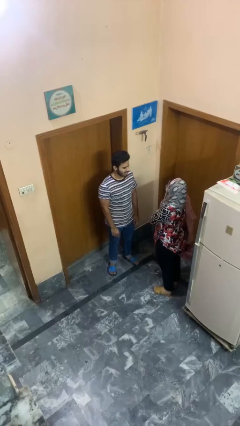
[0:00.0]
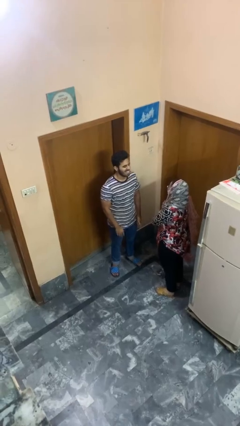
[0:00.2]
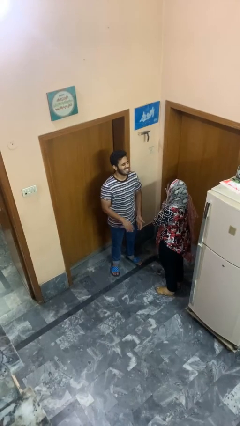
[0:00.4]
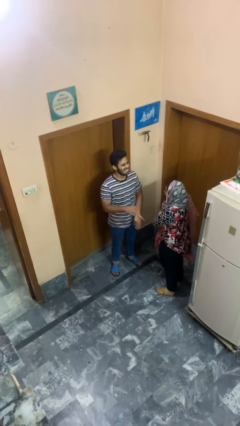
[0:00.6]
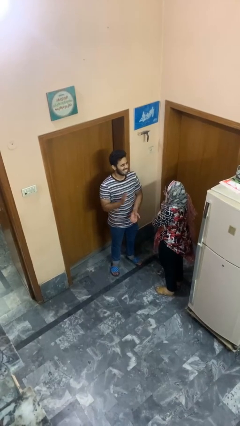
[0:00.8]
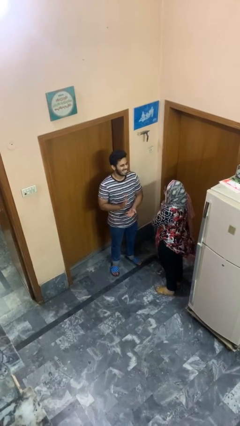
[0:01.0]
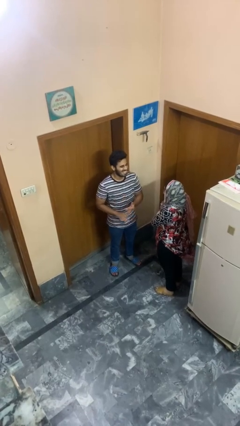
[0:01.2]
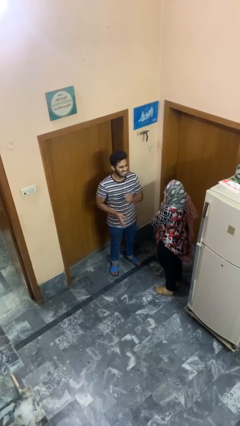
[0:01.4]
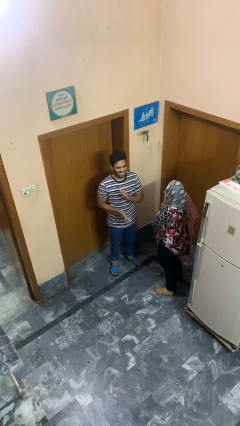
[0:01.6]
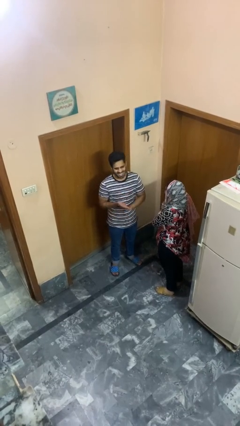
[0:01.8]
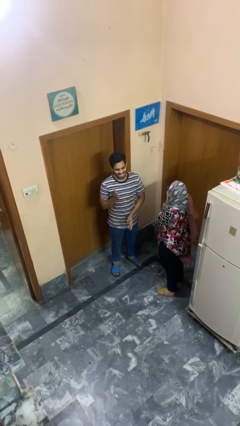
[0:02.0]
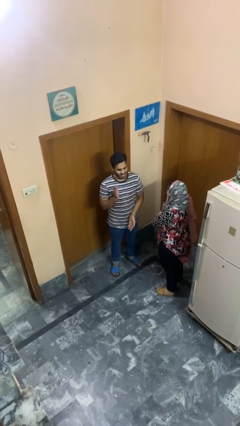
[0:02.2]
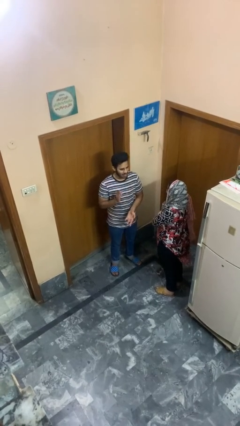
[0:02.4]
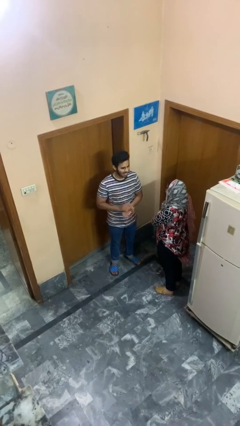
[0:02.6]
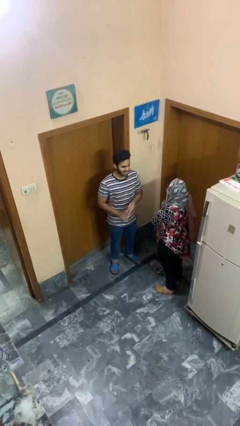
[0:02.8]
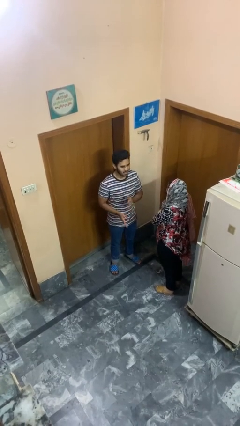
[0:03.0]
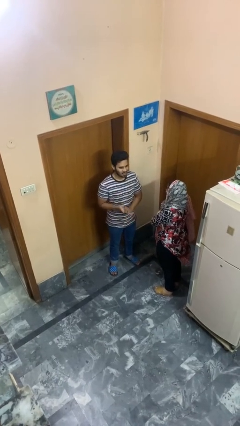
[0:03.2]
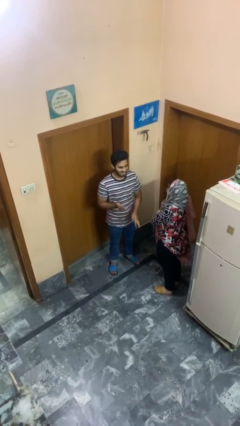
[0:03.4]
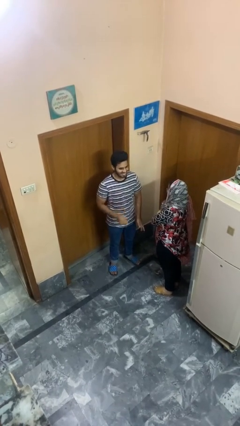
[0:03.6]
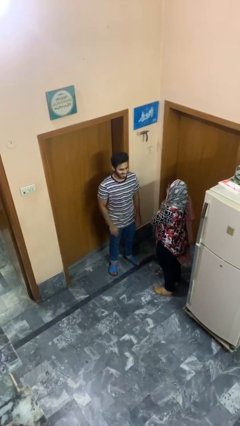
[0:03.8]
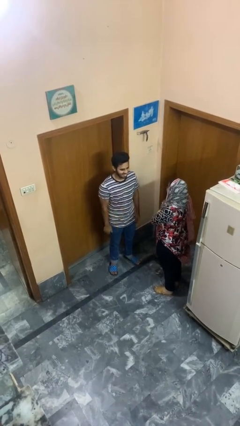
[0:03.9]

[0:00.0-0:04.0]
person laughs with person

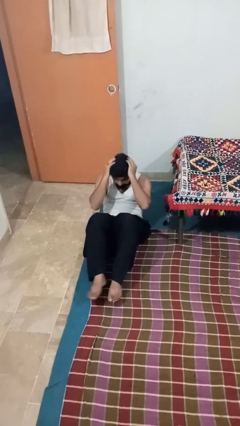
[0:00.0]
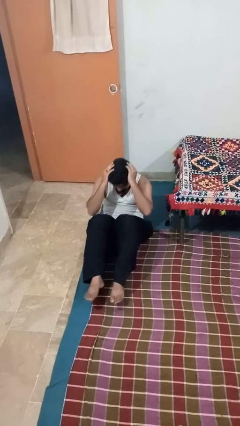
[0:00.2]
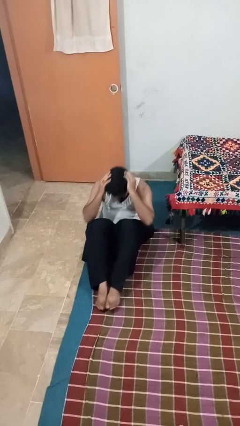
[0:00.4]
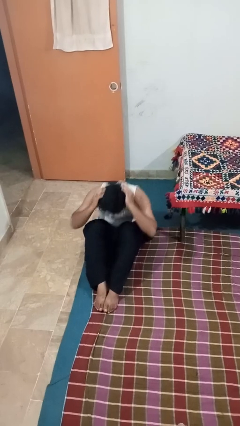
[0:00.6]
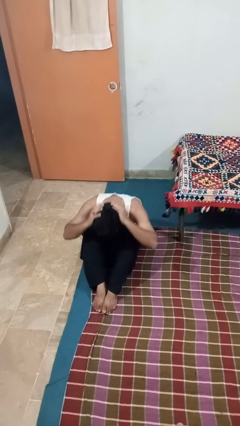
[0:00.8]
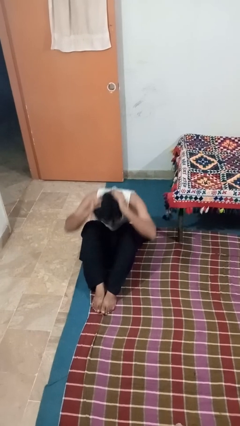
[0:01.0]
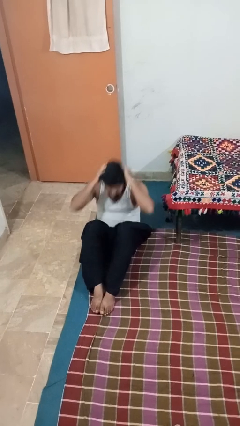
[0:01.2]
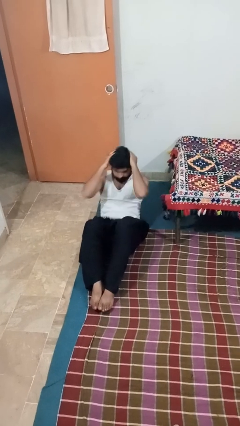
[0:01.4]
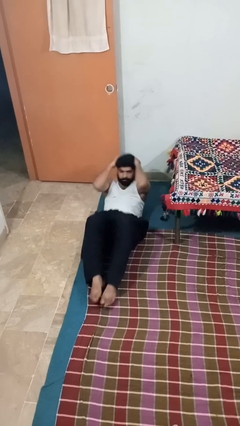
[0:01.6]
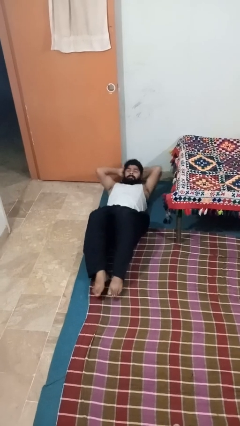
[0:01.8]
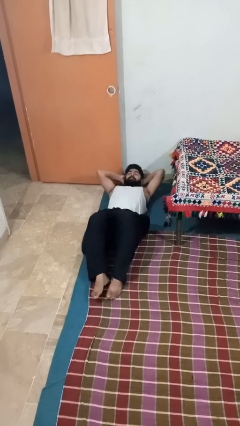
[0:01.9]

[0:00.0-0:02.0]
person exercises with situp

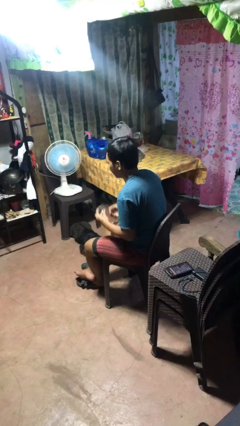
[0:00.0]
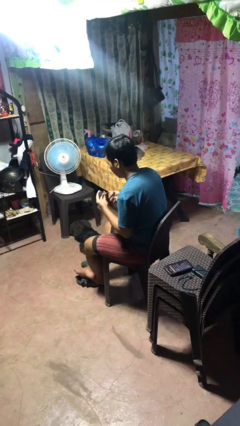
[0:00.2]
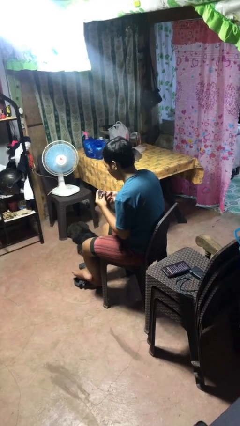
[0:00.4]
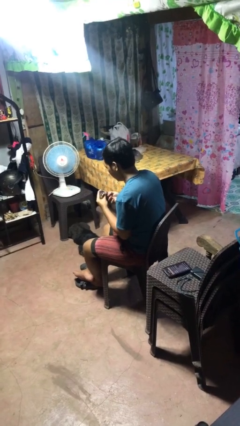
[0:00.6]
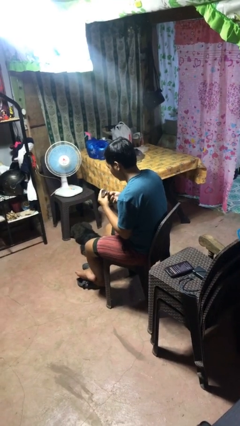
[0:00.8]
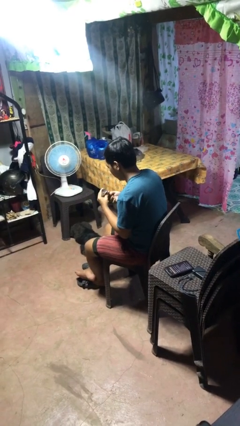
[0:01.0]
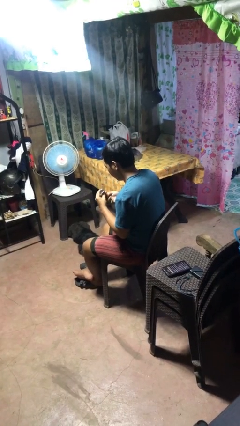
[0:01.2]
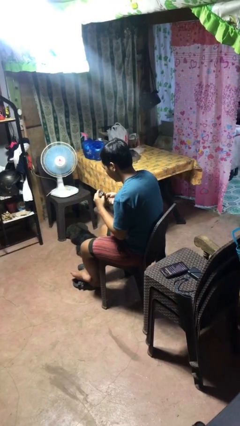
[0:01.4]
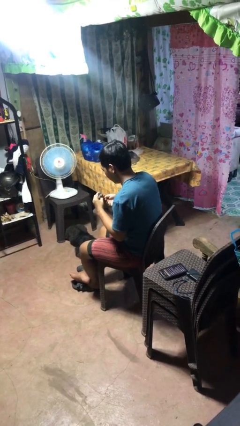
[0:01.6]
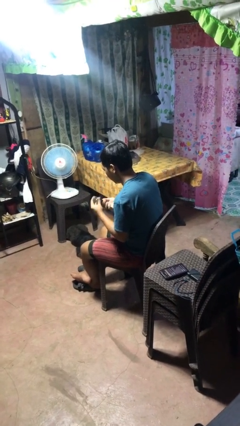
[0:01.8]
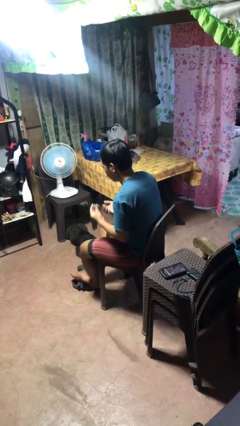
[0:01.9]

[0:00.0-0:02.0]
person clips fingernails

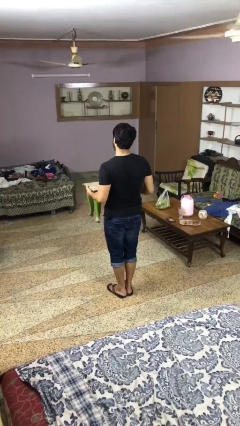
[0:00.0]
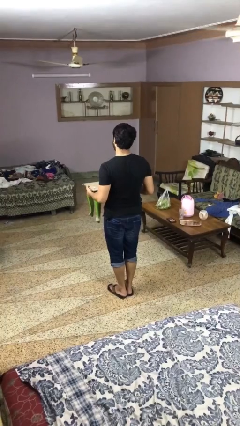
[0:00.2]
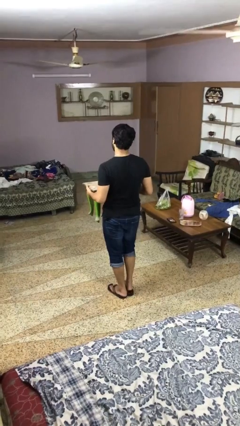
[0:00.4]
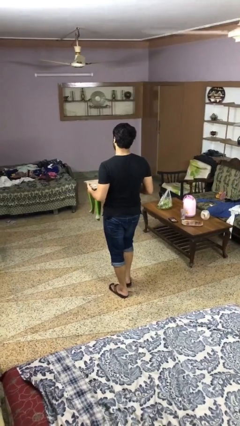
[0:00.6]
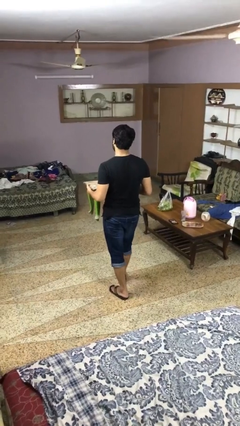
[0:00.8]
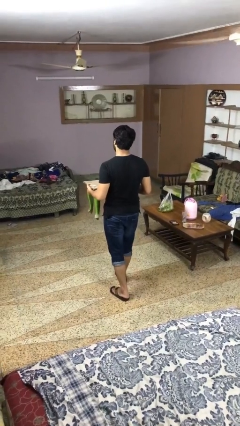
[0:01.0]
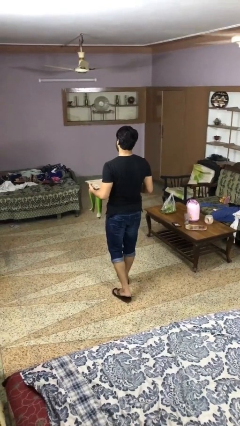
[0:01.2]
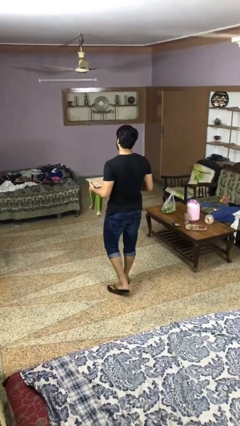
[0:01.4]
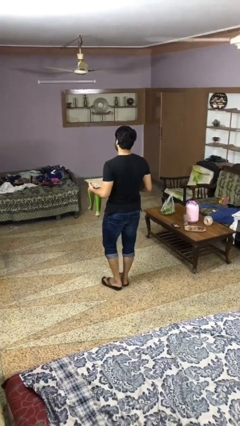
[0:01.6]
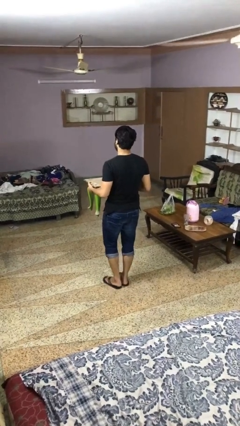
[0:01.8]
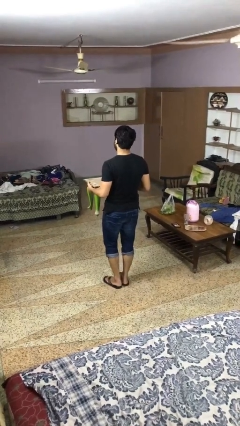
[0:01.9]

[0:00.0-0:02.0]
person carries furniture

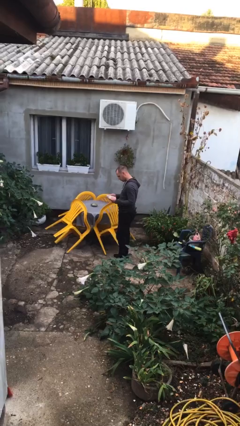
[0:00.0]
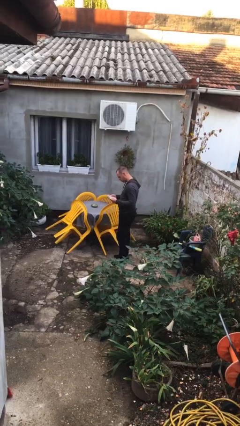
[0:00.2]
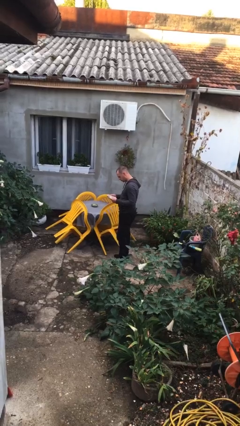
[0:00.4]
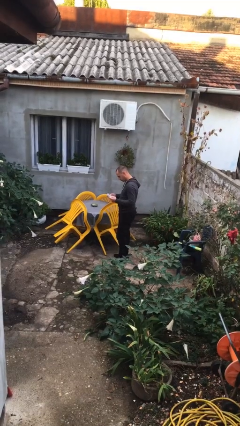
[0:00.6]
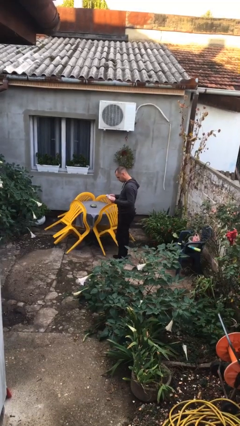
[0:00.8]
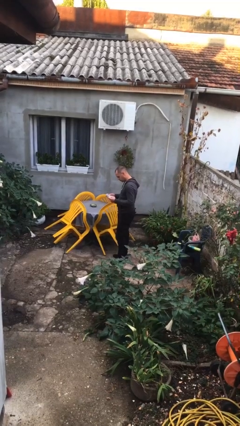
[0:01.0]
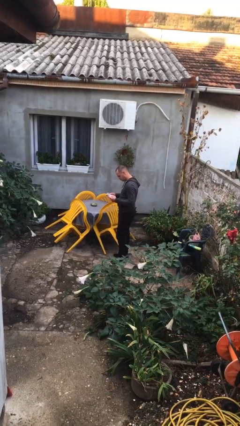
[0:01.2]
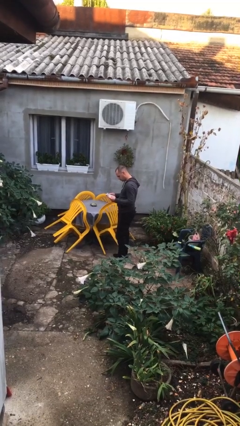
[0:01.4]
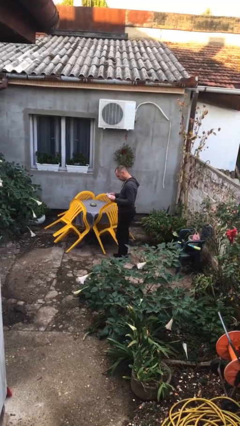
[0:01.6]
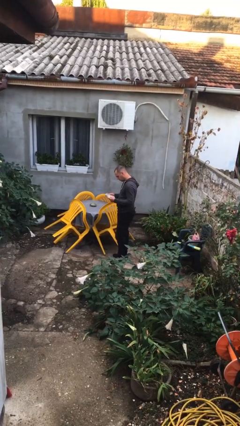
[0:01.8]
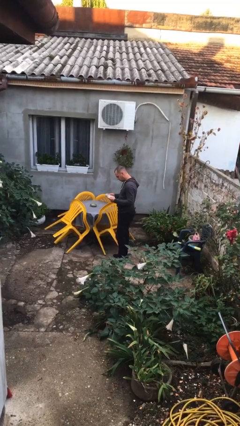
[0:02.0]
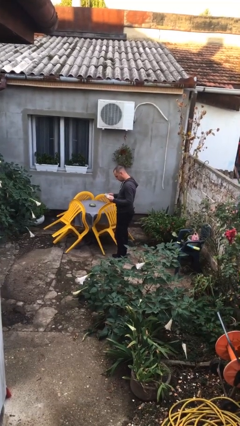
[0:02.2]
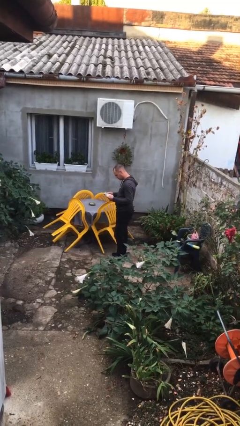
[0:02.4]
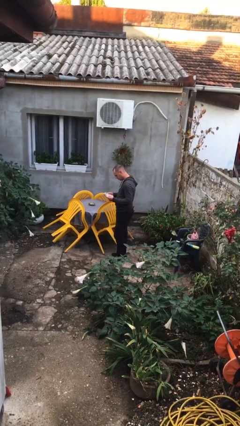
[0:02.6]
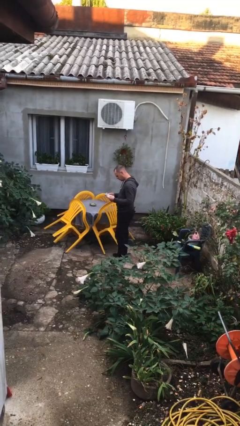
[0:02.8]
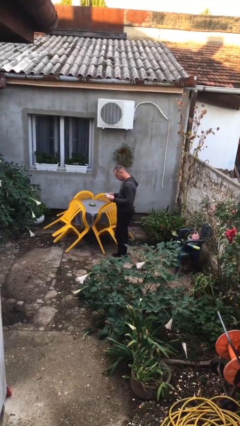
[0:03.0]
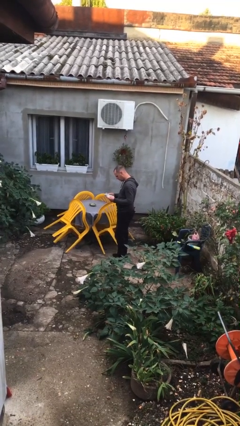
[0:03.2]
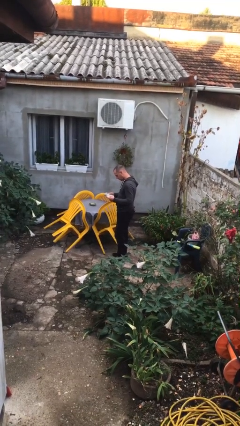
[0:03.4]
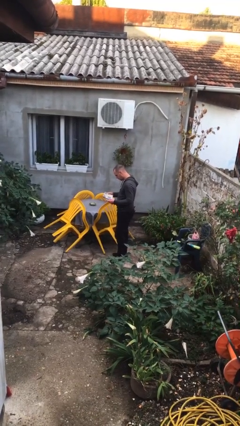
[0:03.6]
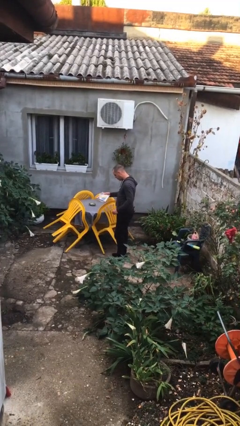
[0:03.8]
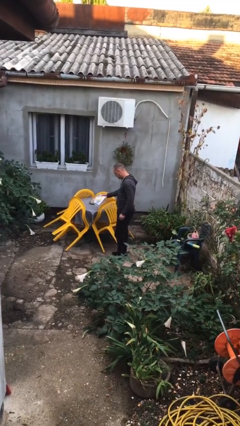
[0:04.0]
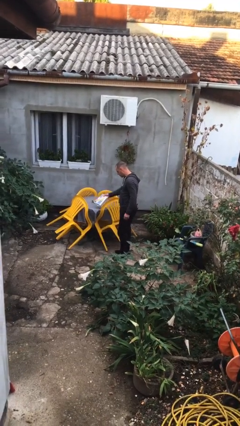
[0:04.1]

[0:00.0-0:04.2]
person reads document

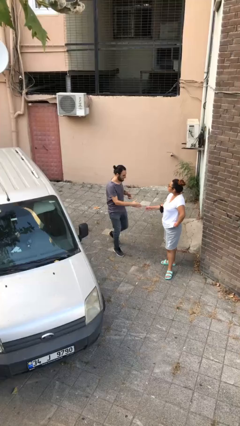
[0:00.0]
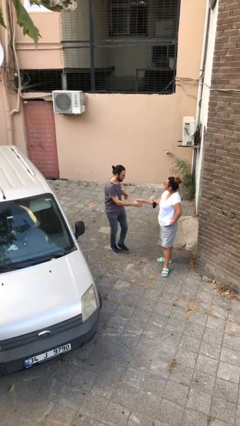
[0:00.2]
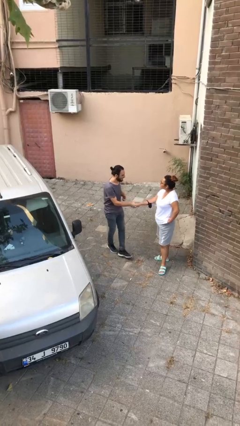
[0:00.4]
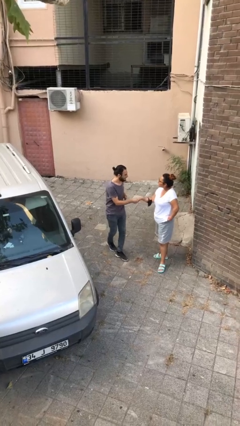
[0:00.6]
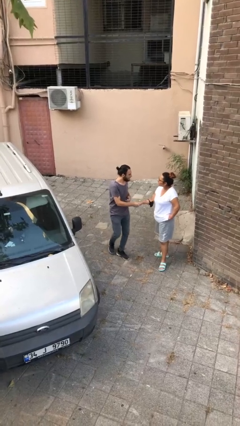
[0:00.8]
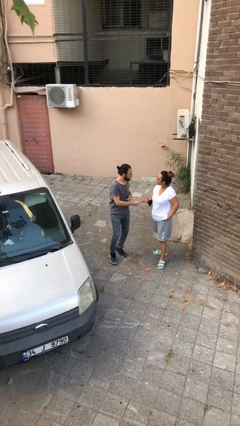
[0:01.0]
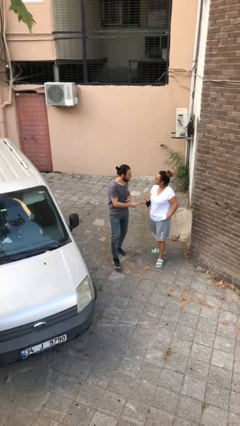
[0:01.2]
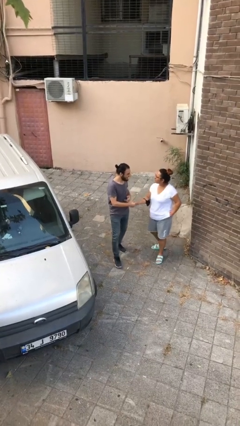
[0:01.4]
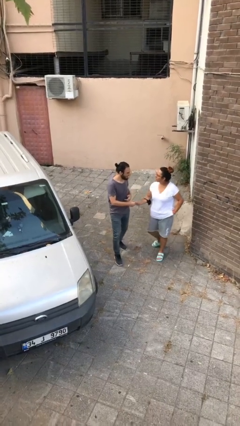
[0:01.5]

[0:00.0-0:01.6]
person shakes hand

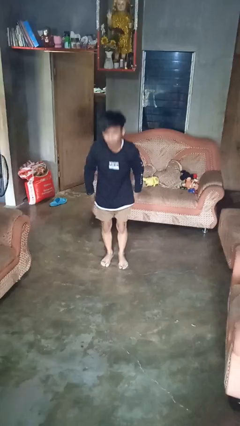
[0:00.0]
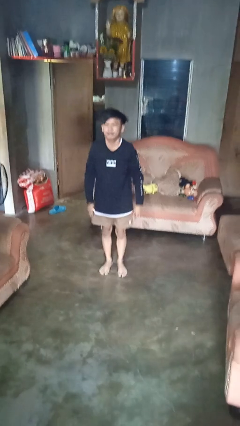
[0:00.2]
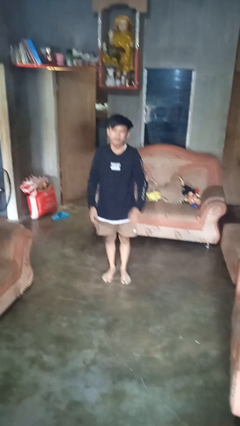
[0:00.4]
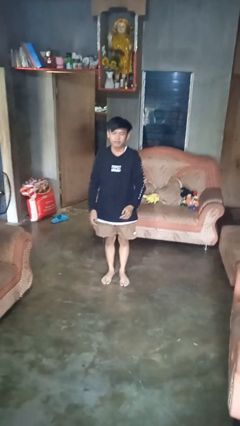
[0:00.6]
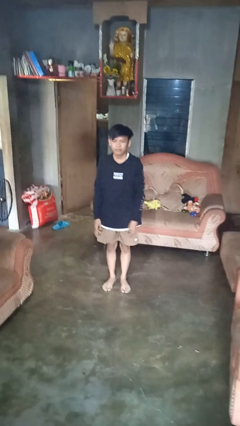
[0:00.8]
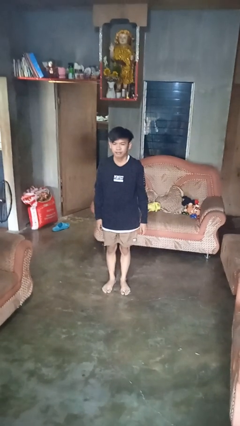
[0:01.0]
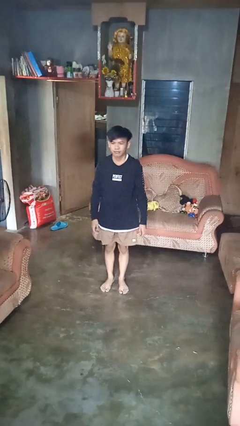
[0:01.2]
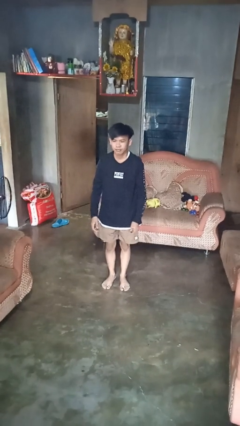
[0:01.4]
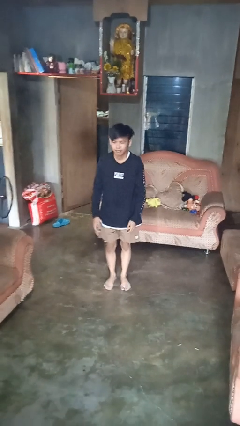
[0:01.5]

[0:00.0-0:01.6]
person stands up from floor
